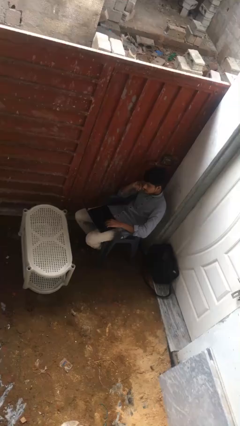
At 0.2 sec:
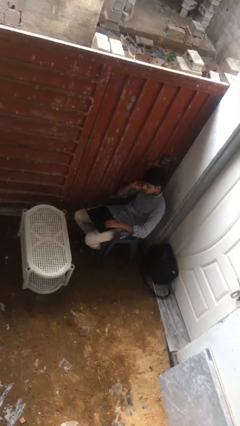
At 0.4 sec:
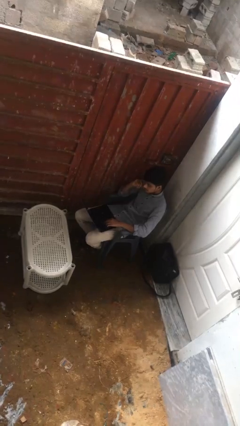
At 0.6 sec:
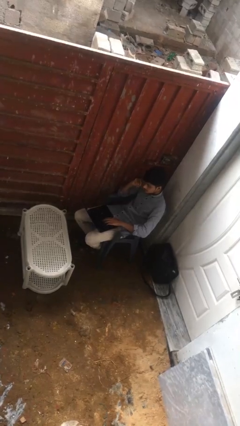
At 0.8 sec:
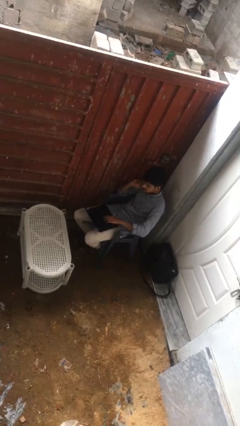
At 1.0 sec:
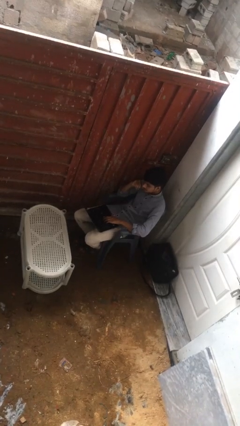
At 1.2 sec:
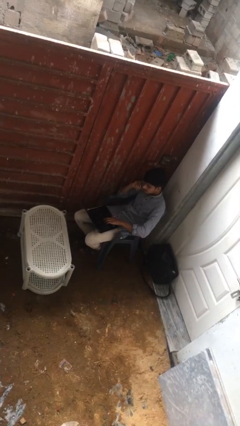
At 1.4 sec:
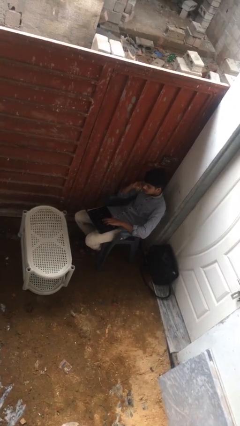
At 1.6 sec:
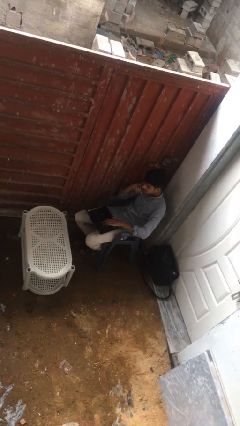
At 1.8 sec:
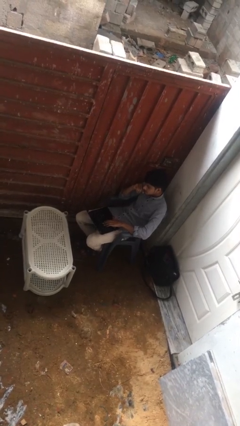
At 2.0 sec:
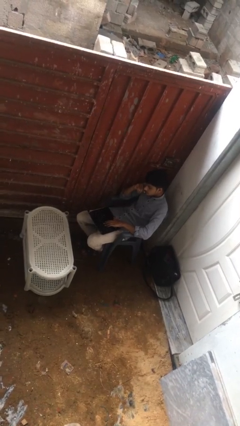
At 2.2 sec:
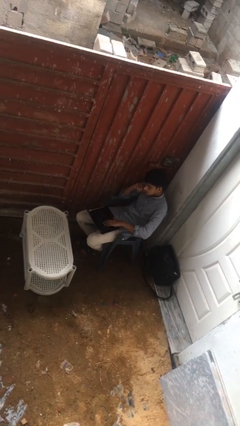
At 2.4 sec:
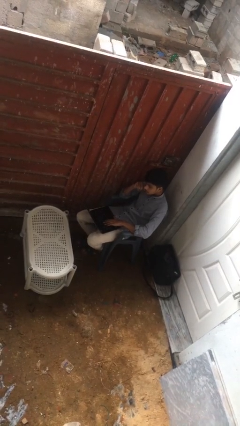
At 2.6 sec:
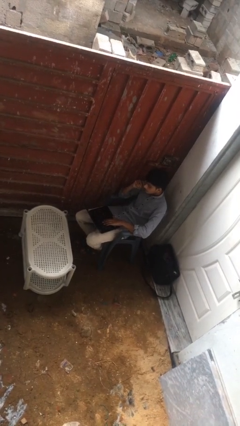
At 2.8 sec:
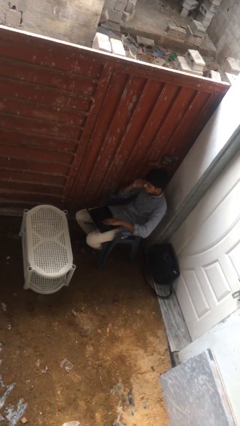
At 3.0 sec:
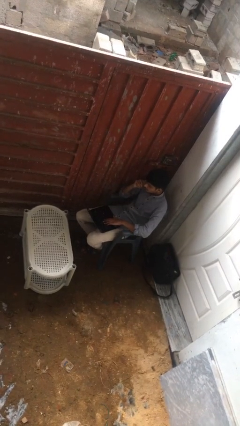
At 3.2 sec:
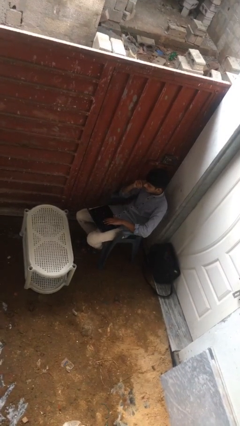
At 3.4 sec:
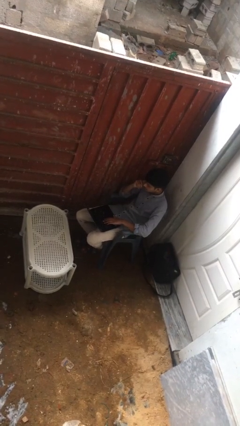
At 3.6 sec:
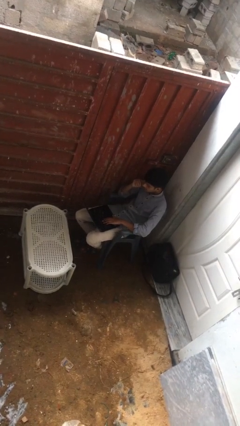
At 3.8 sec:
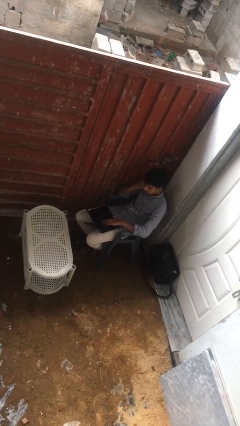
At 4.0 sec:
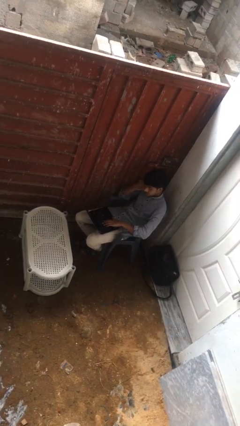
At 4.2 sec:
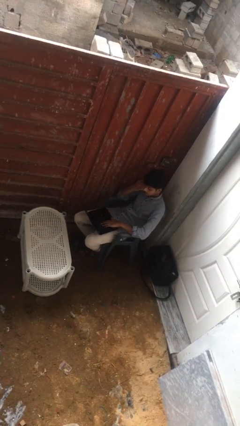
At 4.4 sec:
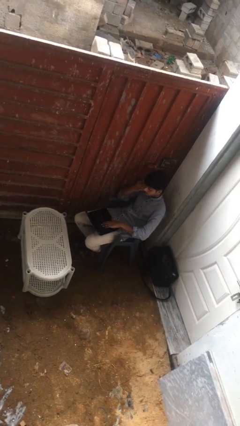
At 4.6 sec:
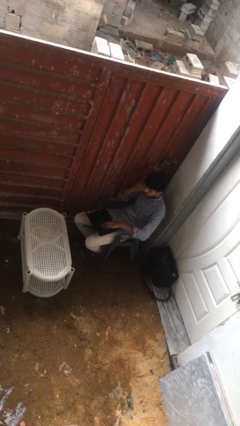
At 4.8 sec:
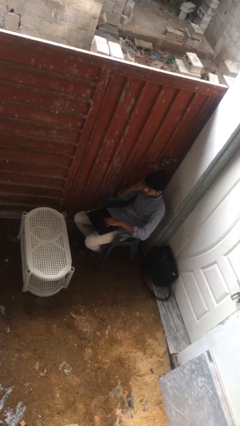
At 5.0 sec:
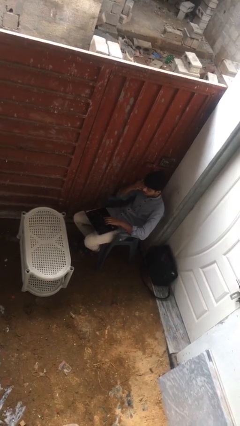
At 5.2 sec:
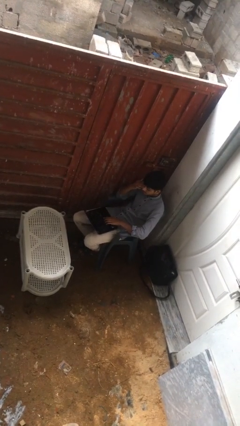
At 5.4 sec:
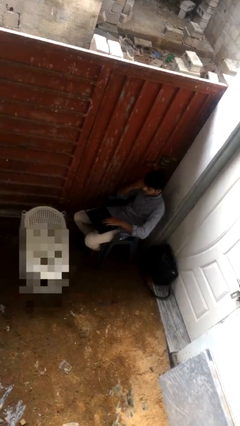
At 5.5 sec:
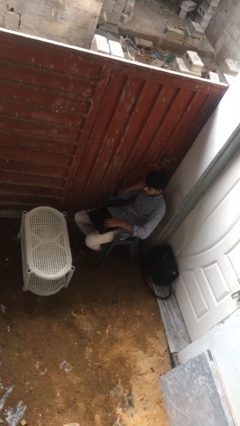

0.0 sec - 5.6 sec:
person interacts with laptop

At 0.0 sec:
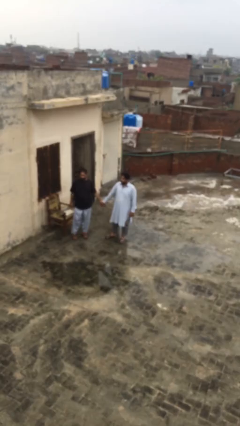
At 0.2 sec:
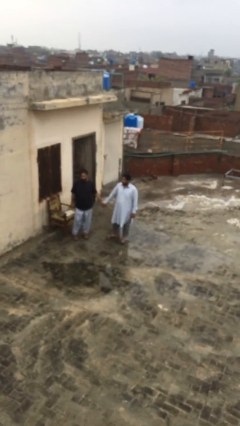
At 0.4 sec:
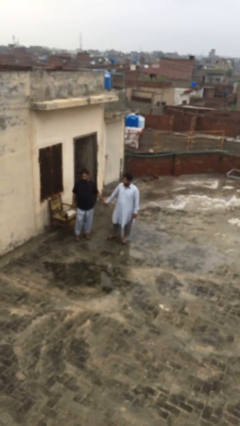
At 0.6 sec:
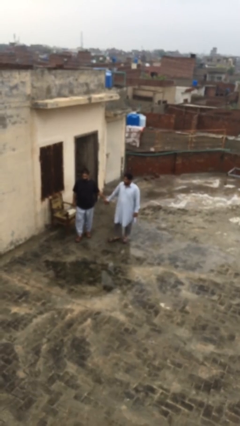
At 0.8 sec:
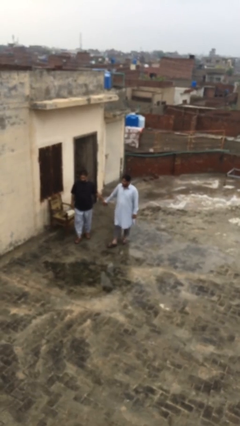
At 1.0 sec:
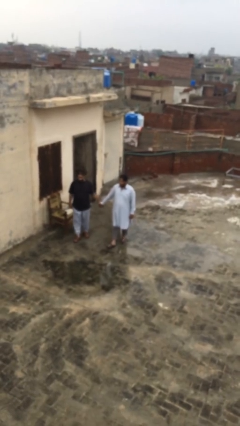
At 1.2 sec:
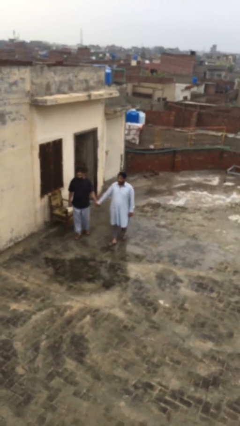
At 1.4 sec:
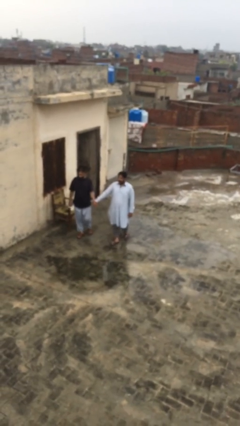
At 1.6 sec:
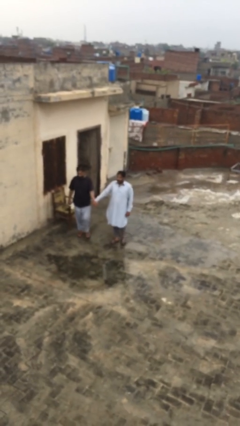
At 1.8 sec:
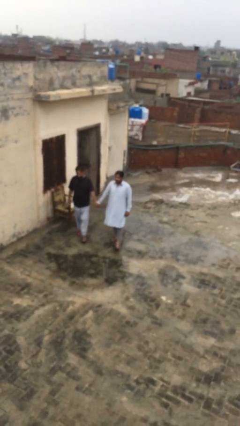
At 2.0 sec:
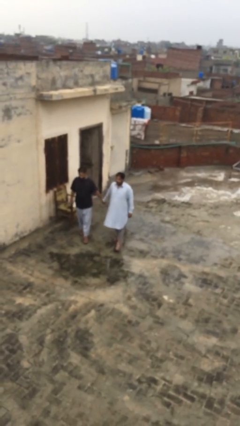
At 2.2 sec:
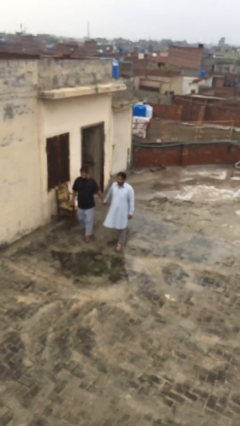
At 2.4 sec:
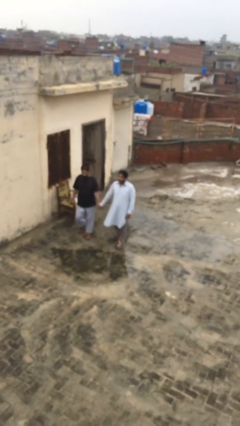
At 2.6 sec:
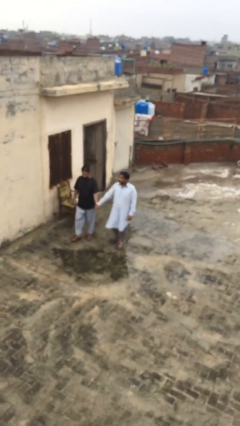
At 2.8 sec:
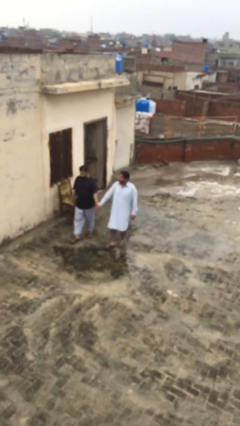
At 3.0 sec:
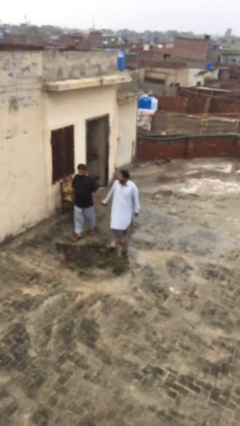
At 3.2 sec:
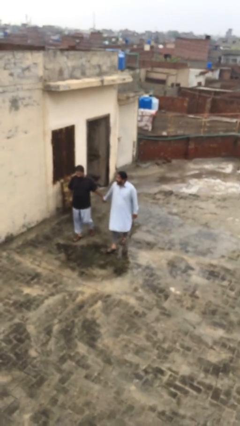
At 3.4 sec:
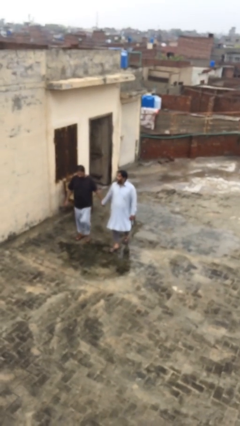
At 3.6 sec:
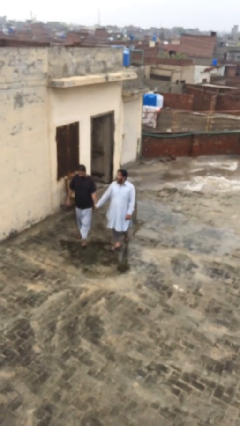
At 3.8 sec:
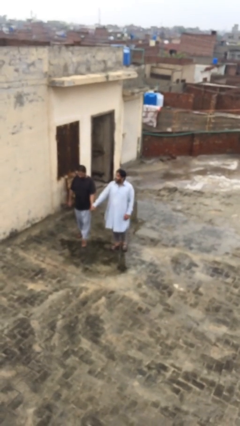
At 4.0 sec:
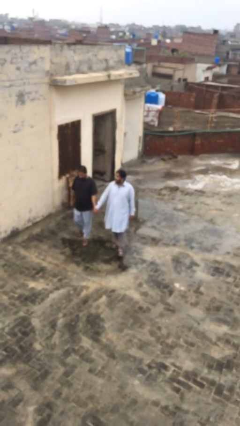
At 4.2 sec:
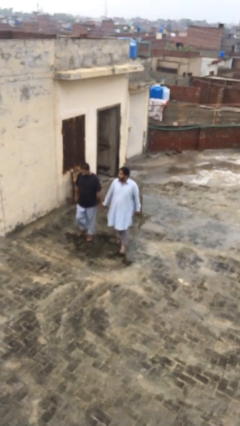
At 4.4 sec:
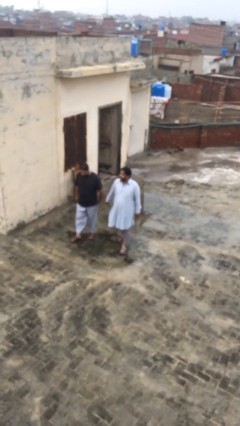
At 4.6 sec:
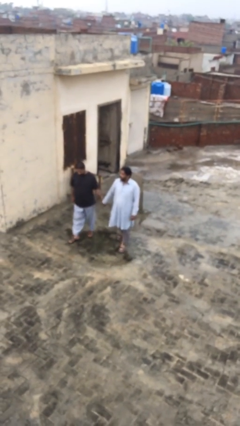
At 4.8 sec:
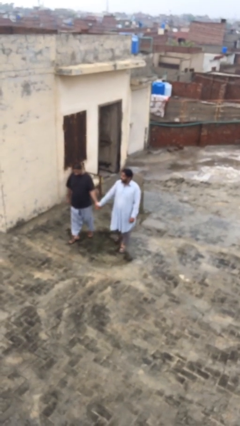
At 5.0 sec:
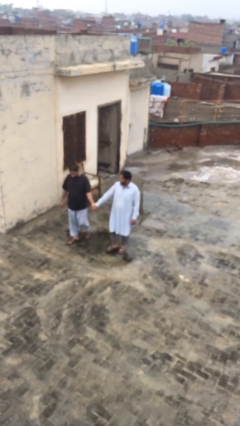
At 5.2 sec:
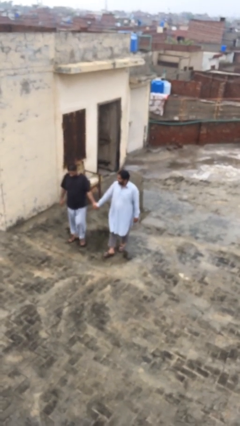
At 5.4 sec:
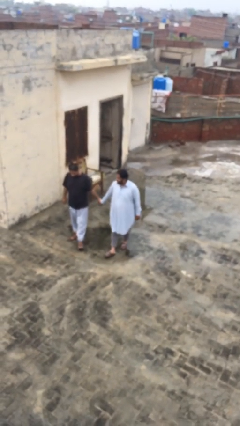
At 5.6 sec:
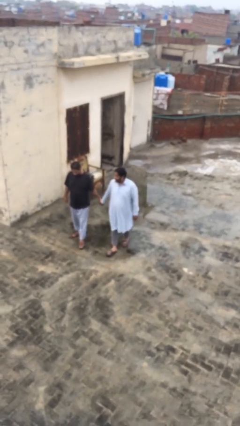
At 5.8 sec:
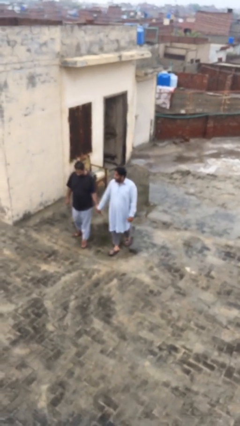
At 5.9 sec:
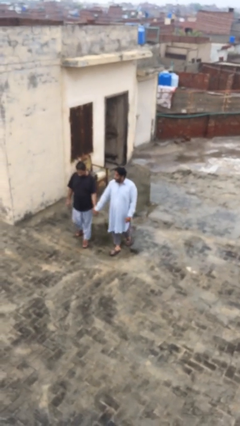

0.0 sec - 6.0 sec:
person holds hand

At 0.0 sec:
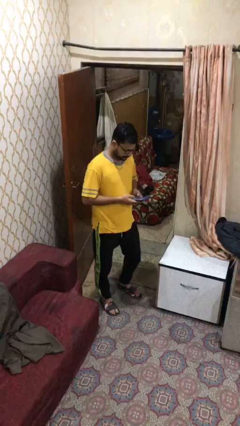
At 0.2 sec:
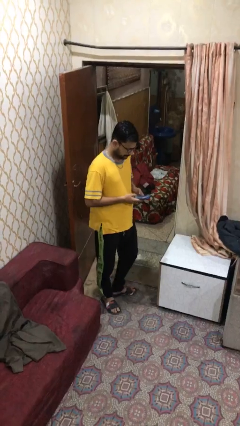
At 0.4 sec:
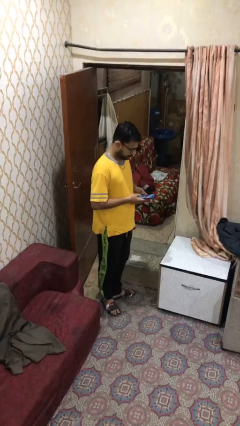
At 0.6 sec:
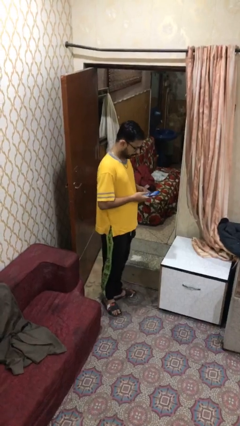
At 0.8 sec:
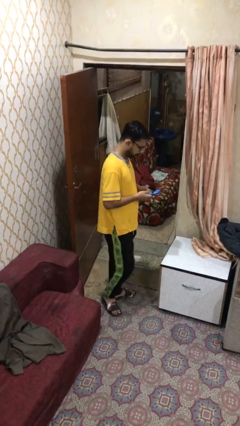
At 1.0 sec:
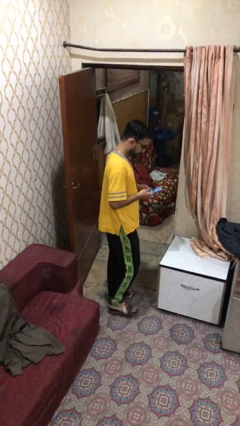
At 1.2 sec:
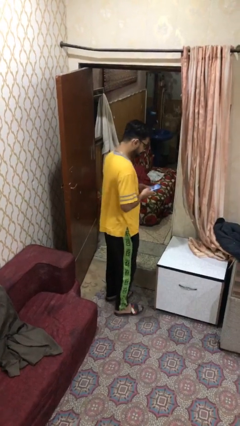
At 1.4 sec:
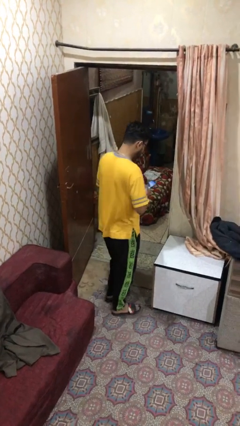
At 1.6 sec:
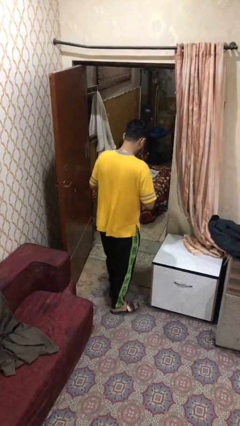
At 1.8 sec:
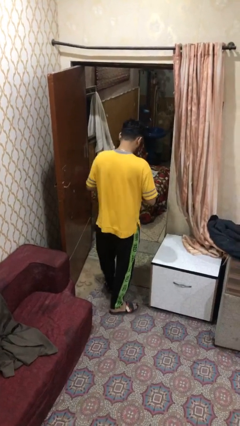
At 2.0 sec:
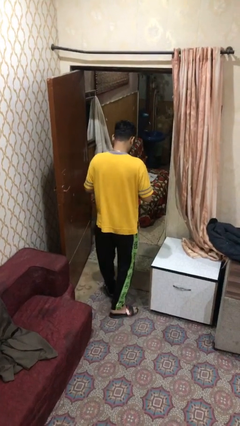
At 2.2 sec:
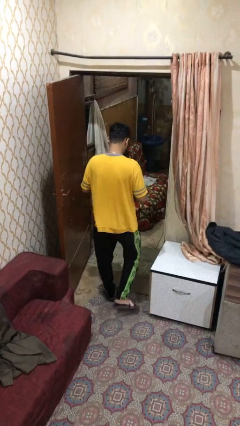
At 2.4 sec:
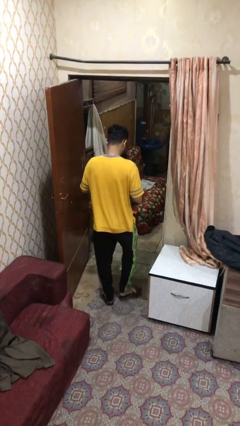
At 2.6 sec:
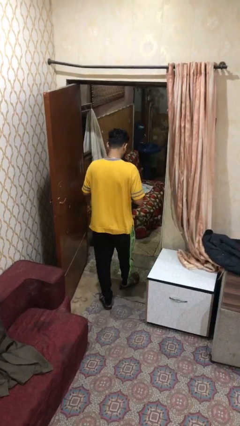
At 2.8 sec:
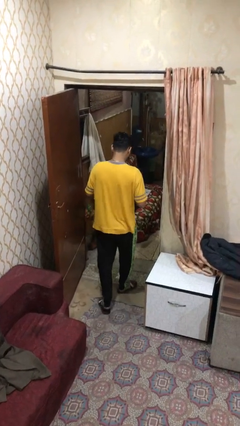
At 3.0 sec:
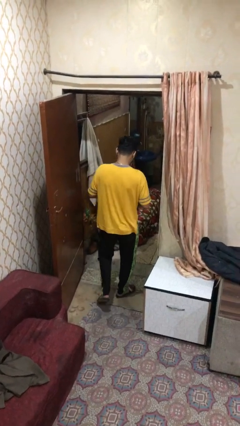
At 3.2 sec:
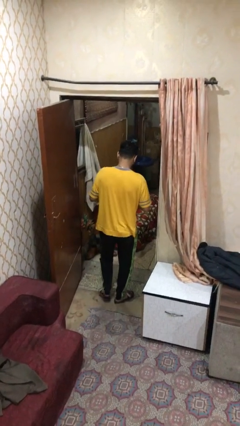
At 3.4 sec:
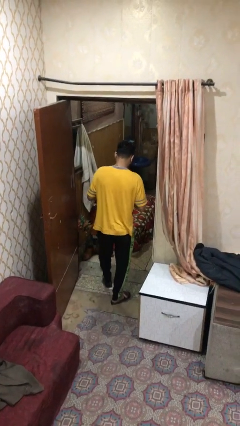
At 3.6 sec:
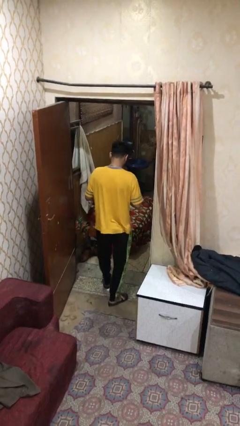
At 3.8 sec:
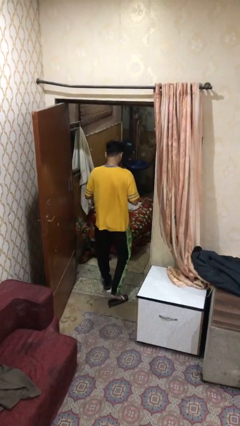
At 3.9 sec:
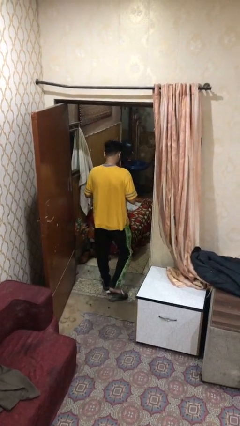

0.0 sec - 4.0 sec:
person exits scene through structure

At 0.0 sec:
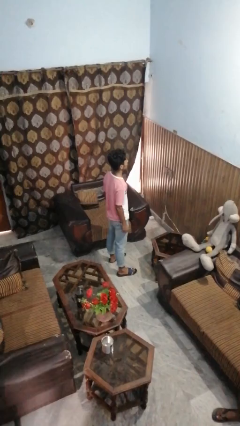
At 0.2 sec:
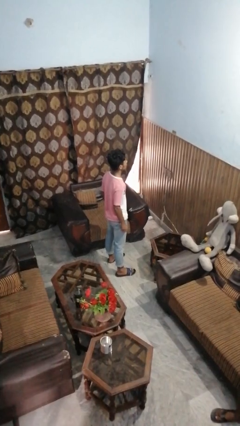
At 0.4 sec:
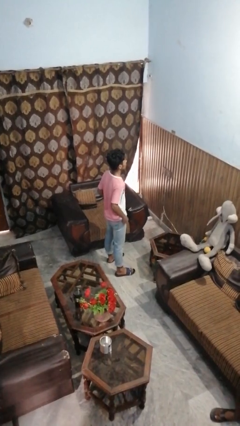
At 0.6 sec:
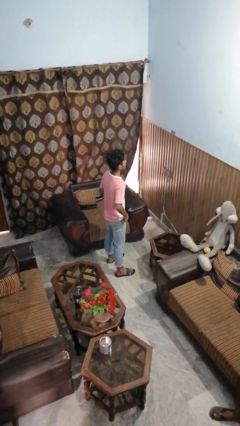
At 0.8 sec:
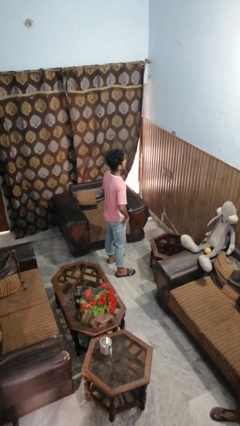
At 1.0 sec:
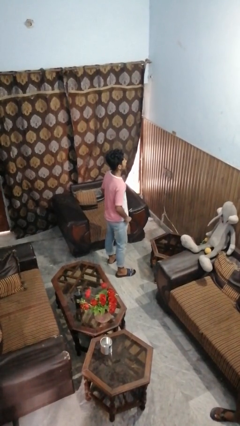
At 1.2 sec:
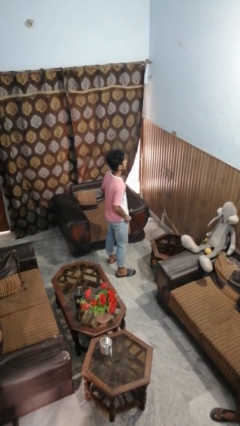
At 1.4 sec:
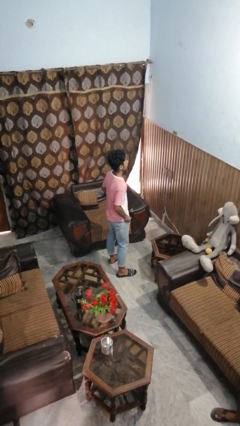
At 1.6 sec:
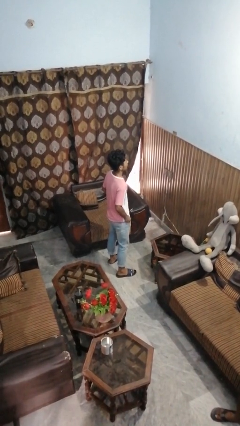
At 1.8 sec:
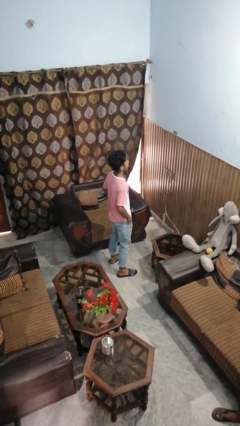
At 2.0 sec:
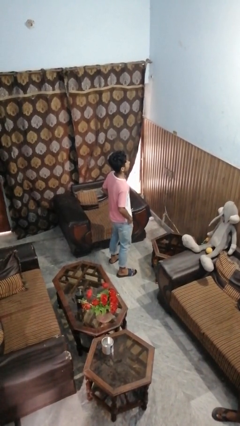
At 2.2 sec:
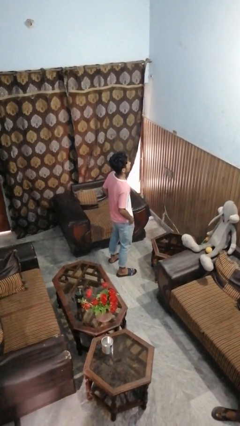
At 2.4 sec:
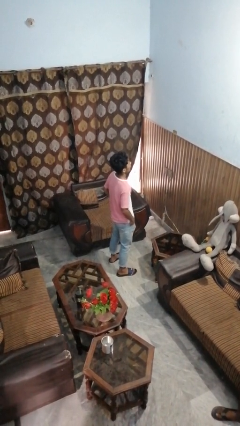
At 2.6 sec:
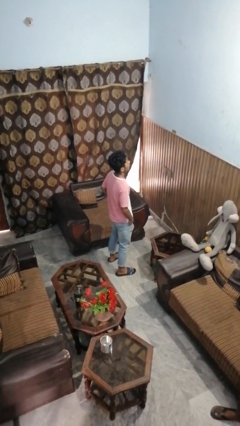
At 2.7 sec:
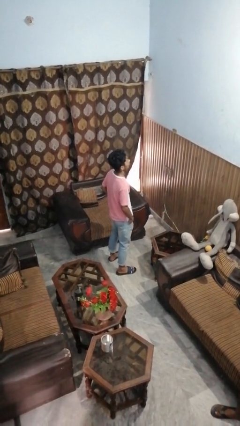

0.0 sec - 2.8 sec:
person puts hands in back pockets
